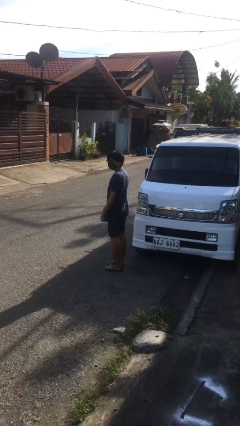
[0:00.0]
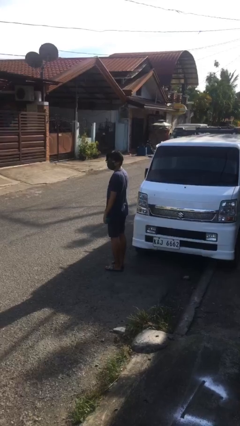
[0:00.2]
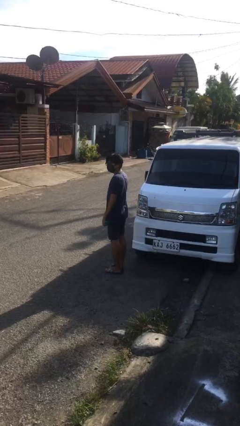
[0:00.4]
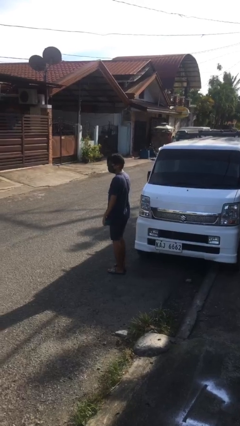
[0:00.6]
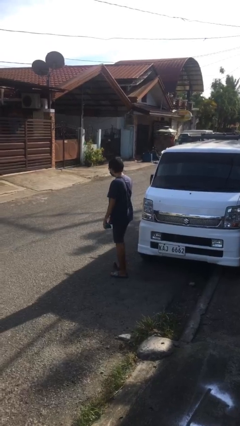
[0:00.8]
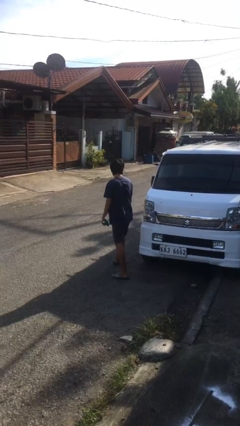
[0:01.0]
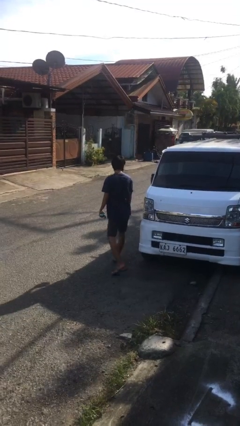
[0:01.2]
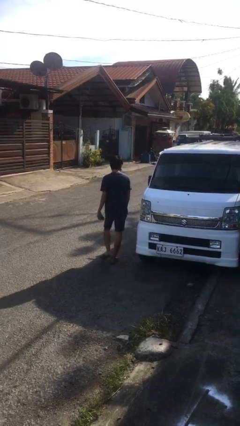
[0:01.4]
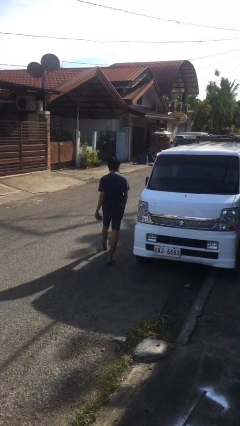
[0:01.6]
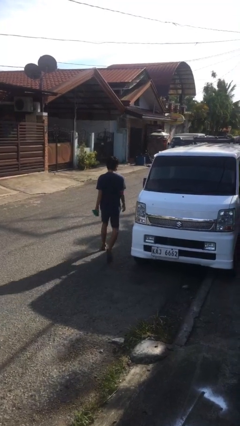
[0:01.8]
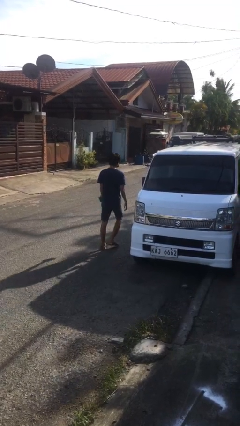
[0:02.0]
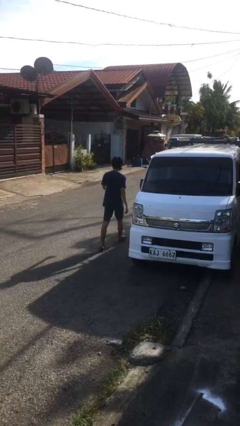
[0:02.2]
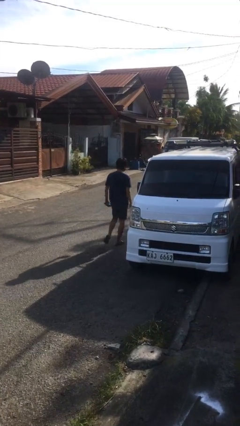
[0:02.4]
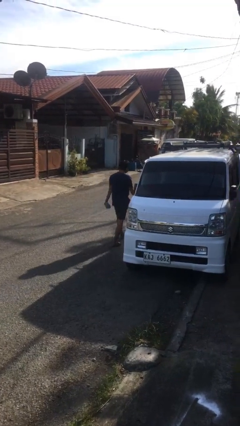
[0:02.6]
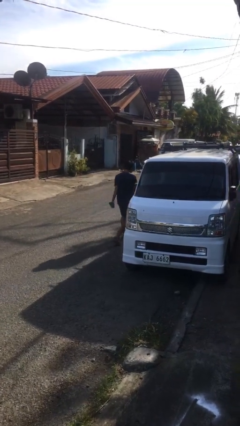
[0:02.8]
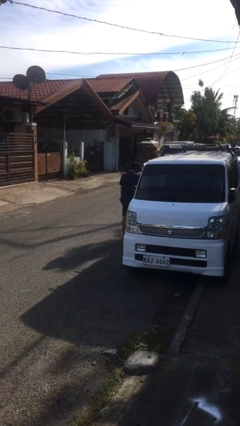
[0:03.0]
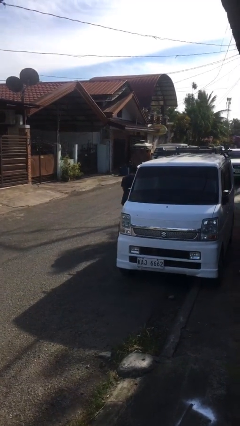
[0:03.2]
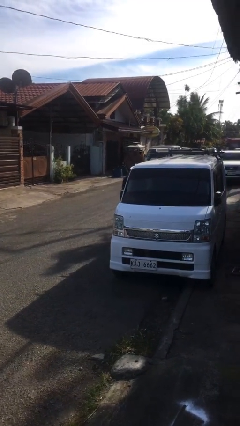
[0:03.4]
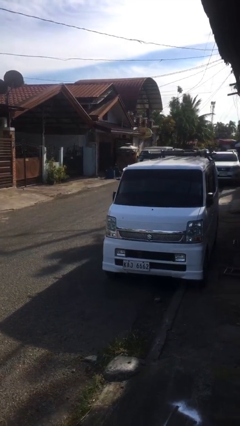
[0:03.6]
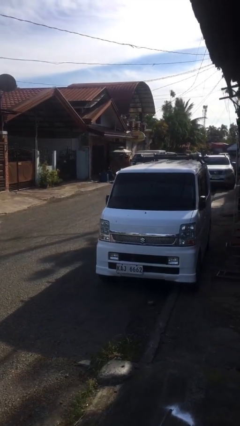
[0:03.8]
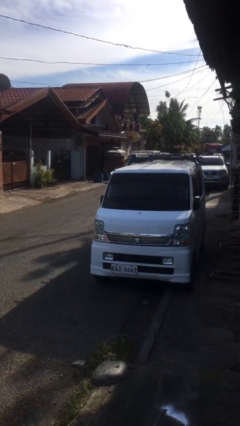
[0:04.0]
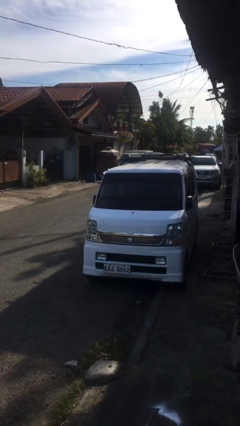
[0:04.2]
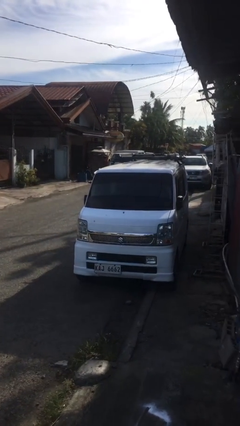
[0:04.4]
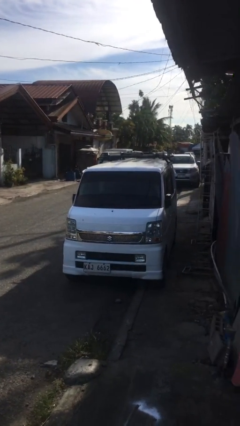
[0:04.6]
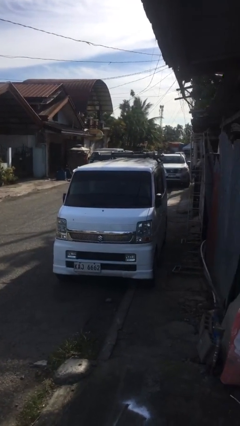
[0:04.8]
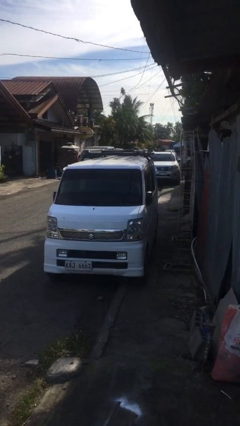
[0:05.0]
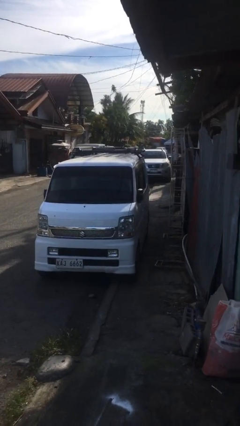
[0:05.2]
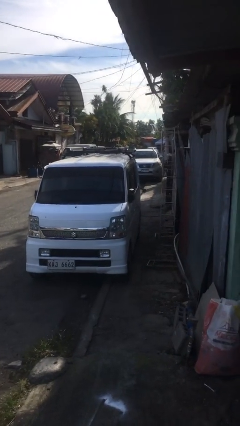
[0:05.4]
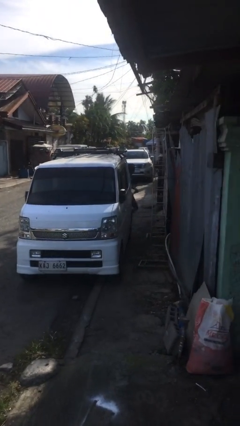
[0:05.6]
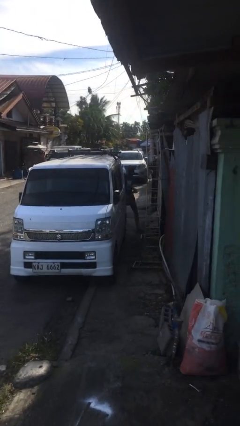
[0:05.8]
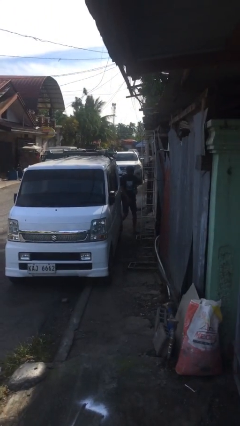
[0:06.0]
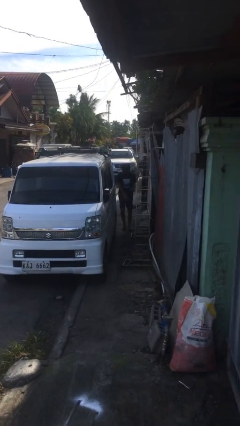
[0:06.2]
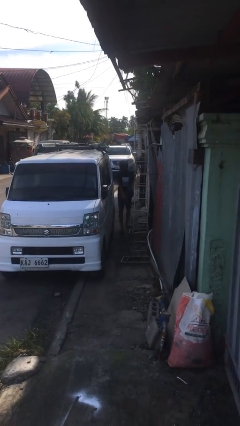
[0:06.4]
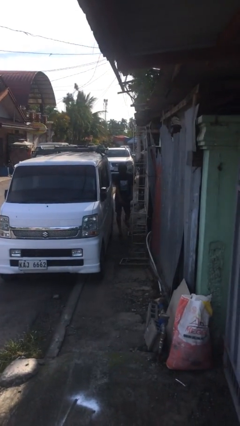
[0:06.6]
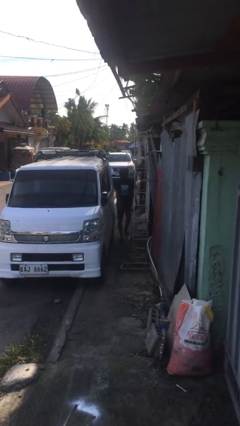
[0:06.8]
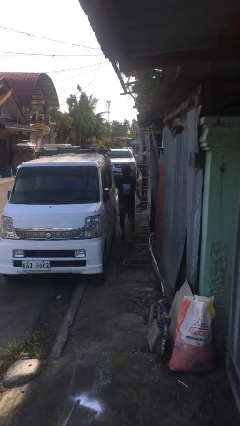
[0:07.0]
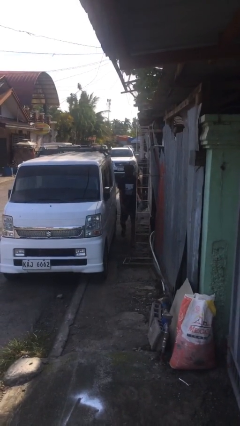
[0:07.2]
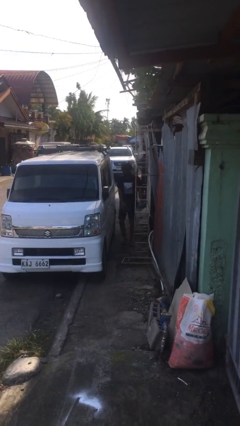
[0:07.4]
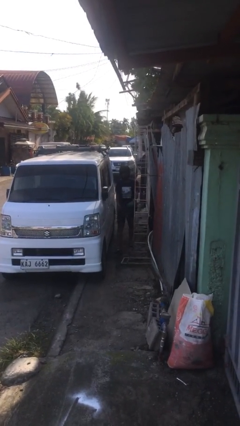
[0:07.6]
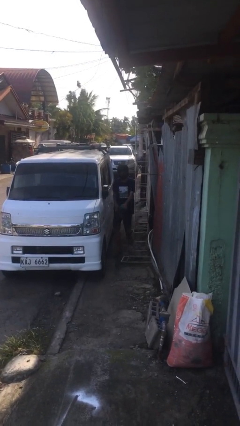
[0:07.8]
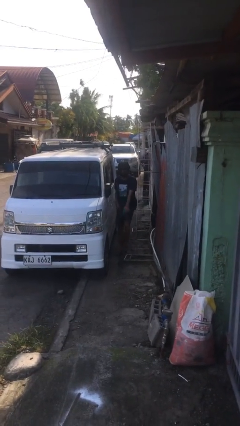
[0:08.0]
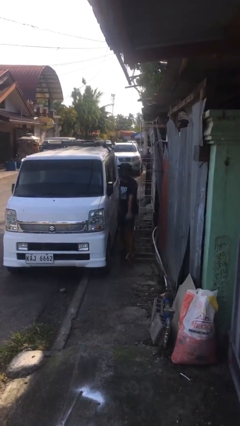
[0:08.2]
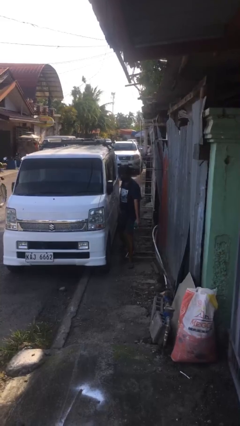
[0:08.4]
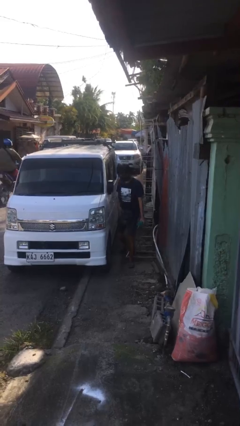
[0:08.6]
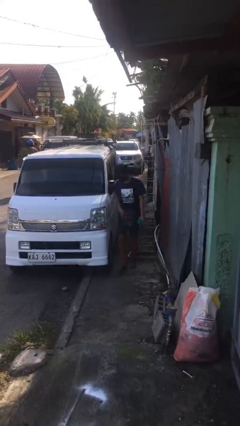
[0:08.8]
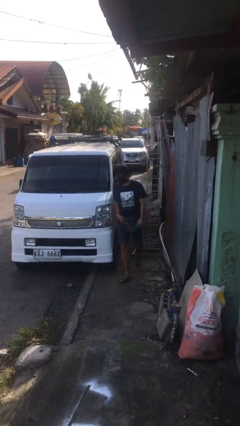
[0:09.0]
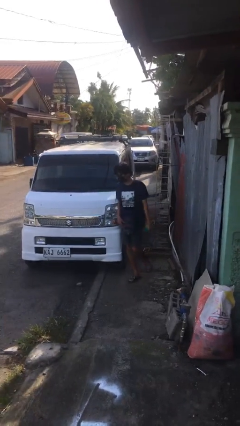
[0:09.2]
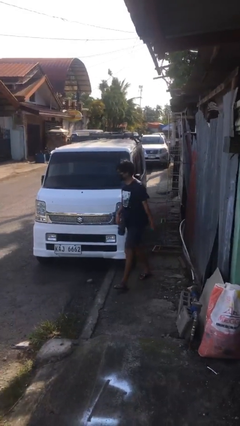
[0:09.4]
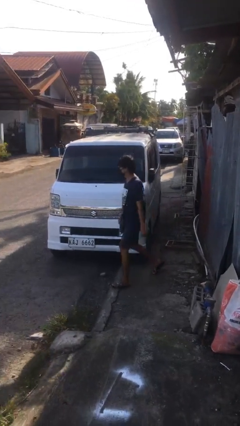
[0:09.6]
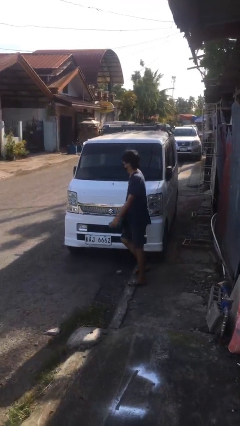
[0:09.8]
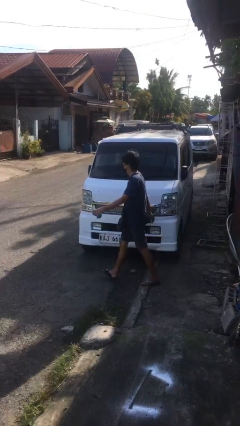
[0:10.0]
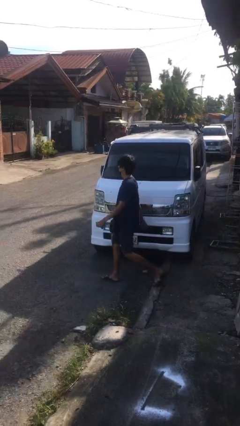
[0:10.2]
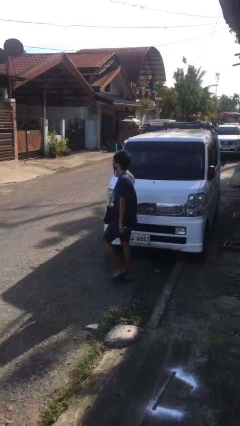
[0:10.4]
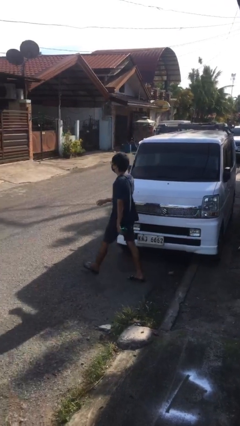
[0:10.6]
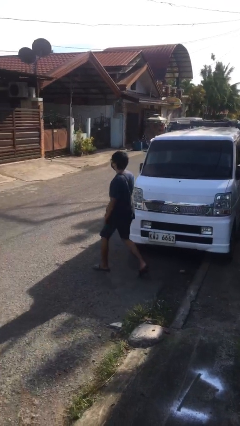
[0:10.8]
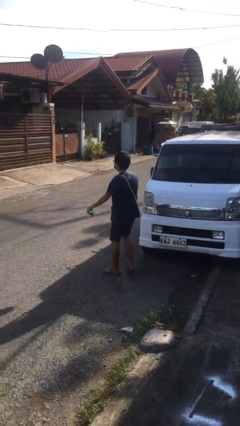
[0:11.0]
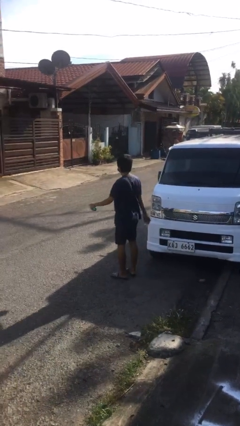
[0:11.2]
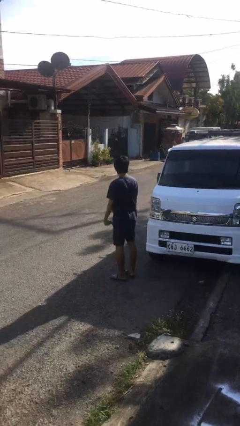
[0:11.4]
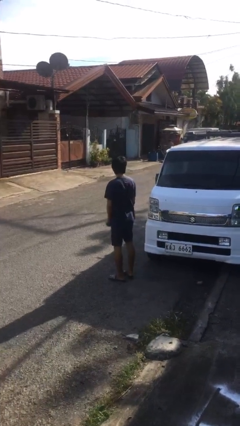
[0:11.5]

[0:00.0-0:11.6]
person walks around car

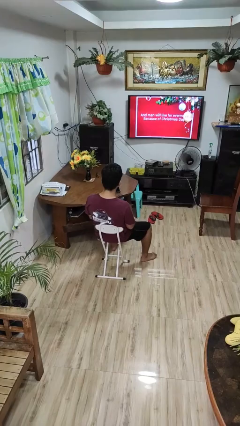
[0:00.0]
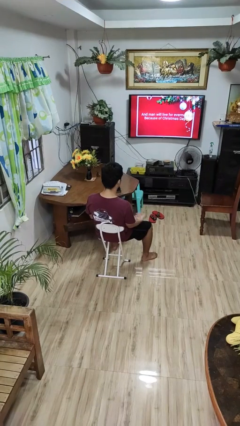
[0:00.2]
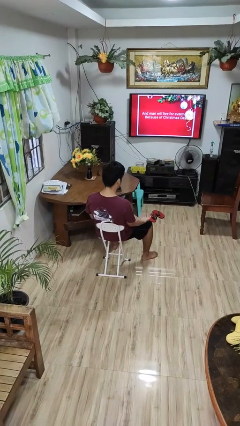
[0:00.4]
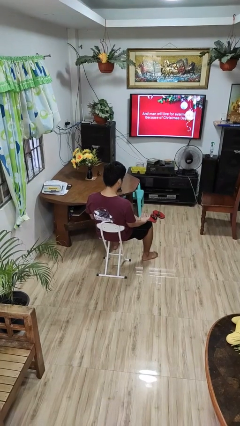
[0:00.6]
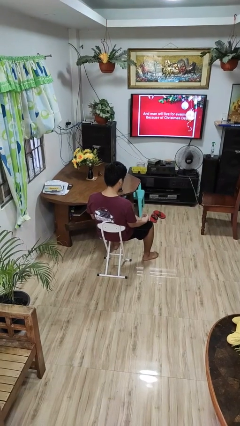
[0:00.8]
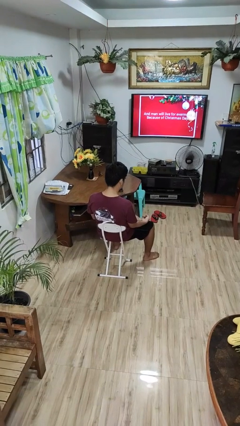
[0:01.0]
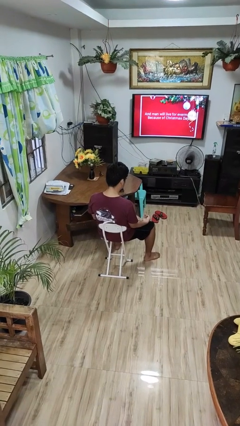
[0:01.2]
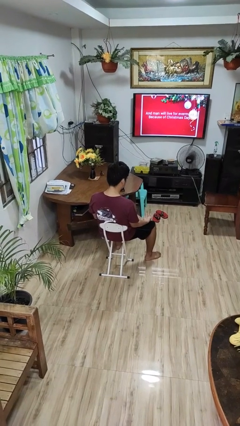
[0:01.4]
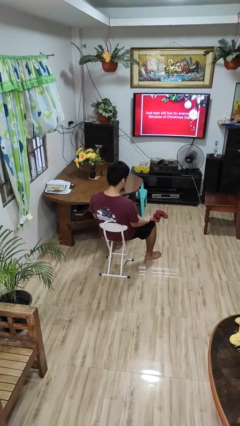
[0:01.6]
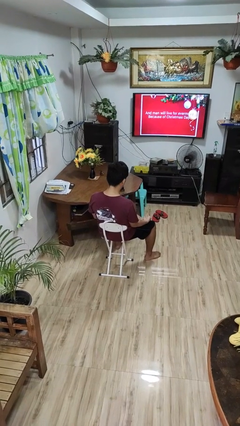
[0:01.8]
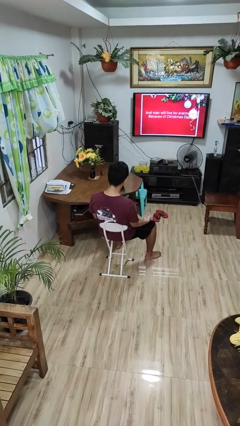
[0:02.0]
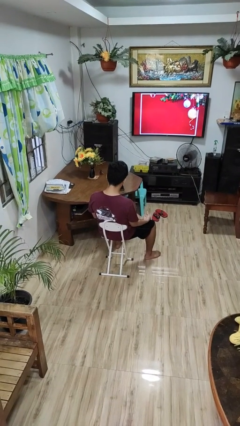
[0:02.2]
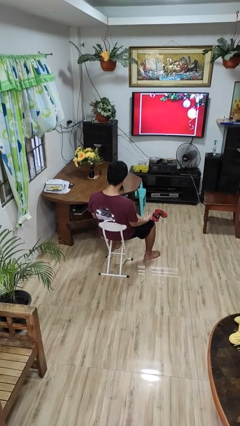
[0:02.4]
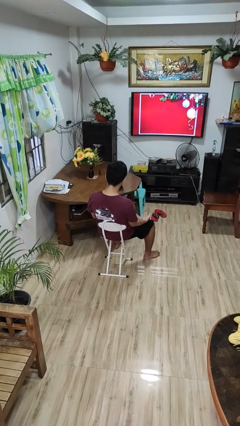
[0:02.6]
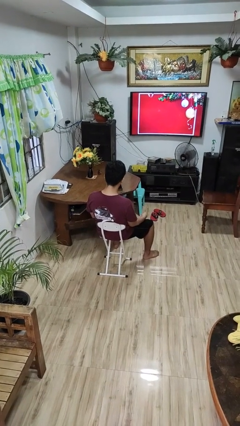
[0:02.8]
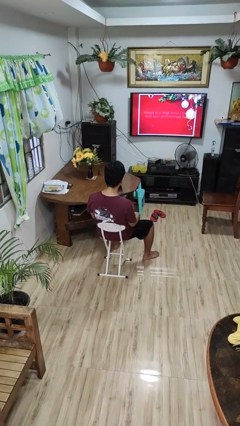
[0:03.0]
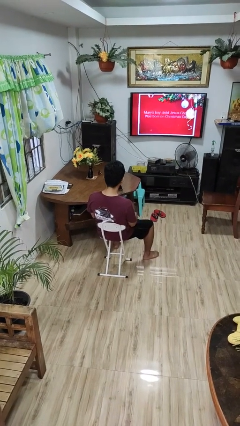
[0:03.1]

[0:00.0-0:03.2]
person looks at hands in lap

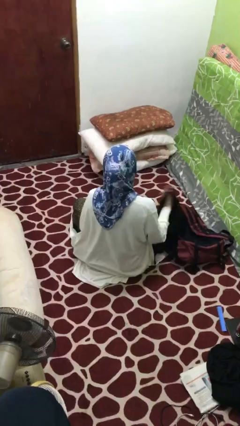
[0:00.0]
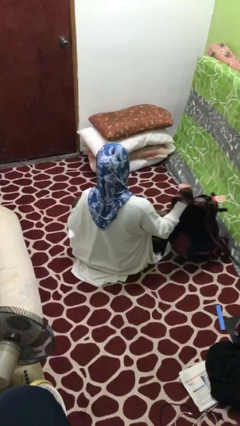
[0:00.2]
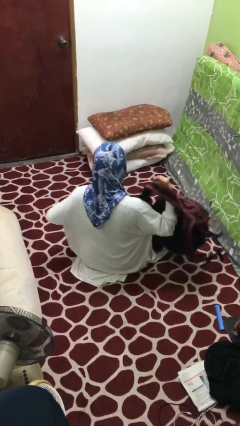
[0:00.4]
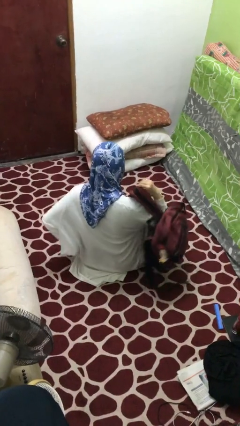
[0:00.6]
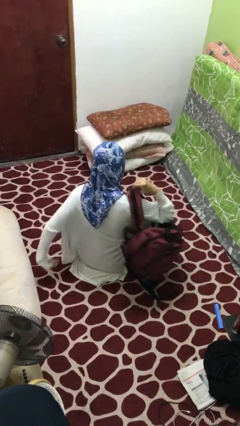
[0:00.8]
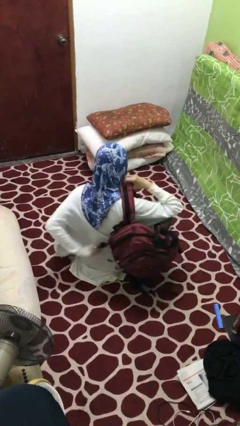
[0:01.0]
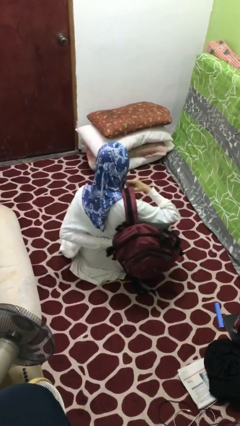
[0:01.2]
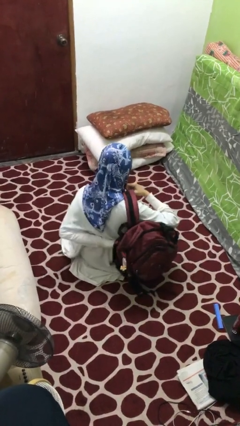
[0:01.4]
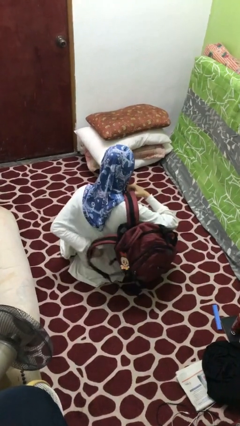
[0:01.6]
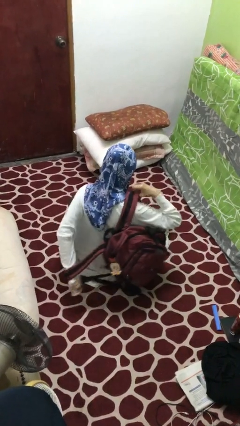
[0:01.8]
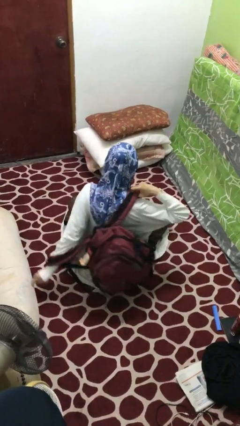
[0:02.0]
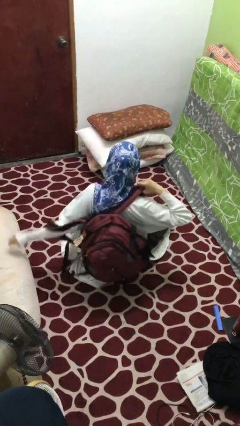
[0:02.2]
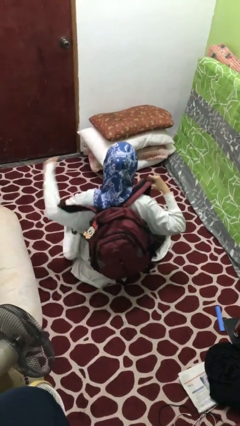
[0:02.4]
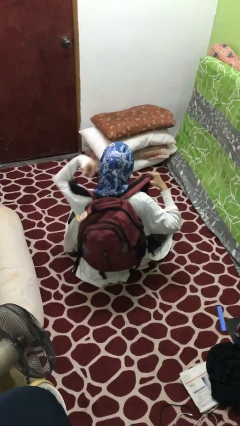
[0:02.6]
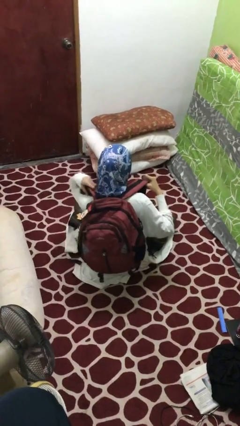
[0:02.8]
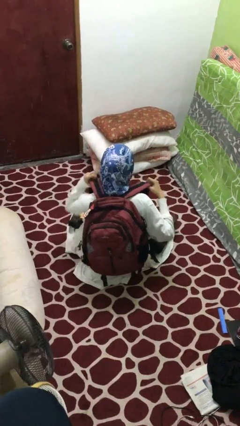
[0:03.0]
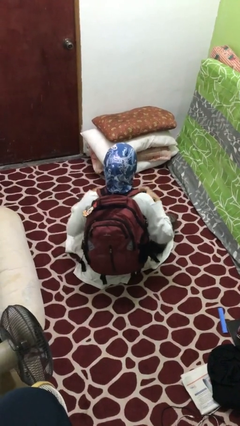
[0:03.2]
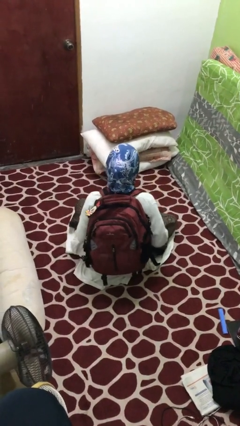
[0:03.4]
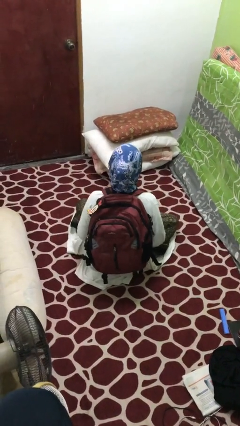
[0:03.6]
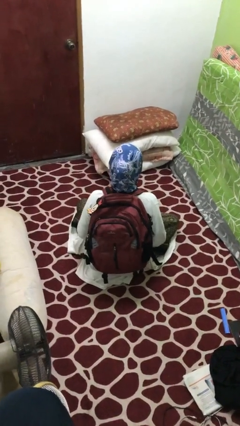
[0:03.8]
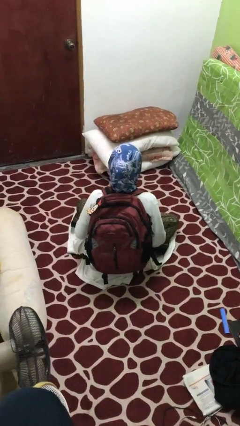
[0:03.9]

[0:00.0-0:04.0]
person puts on backpack
